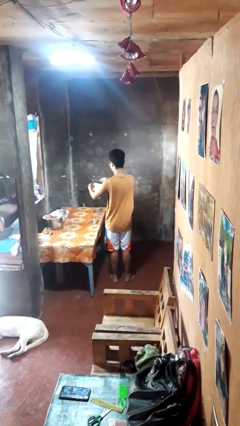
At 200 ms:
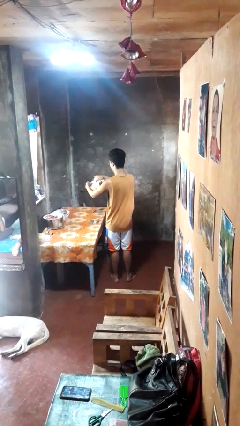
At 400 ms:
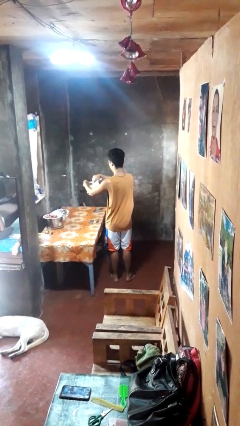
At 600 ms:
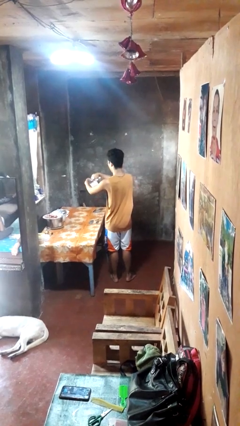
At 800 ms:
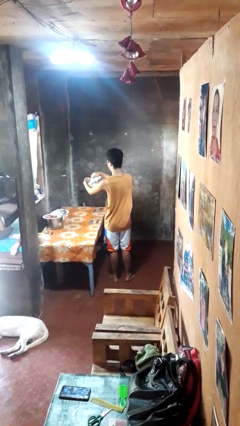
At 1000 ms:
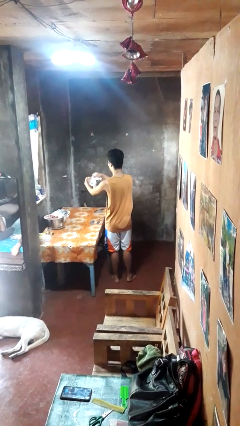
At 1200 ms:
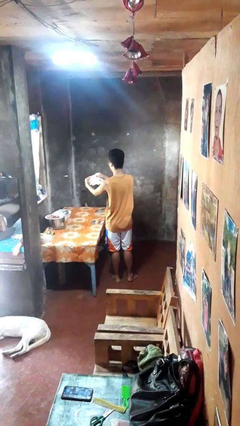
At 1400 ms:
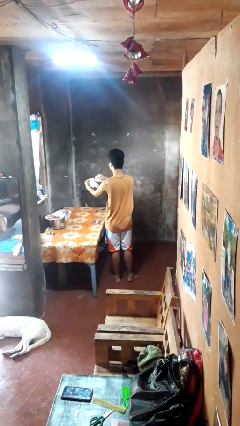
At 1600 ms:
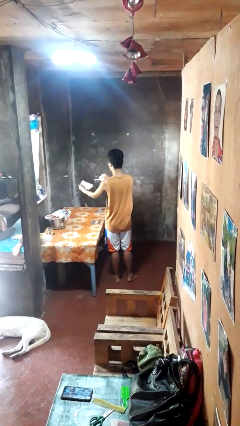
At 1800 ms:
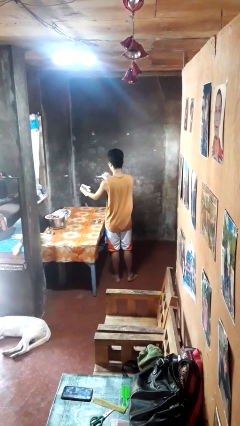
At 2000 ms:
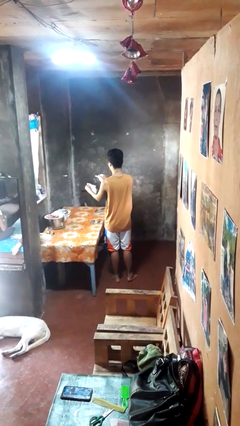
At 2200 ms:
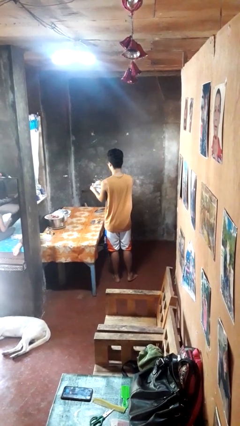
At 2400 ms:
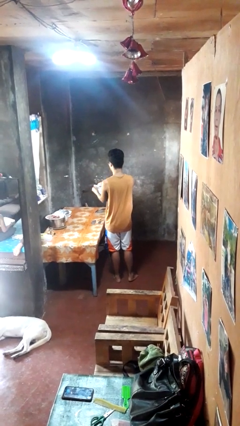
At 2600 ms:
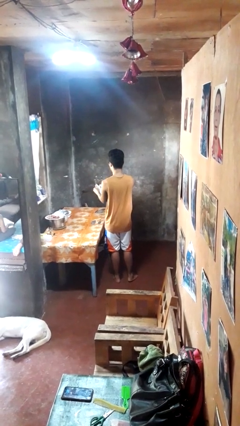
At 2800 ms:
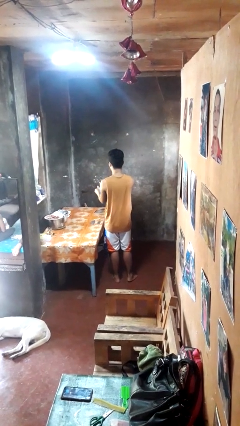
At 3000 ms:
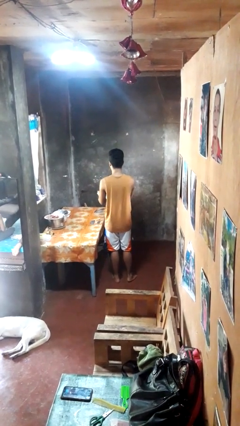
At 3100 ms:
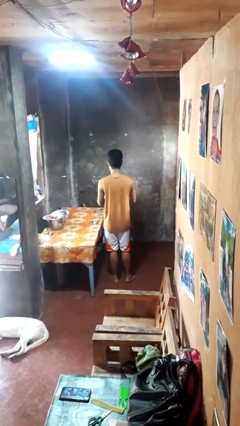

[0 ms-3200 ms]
person tears paper

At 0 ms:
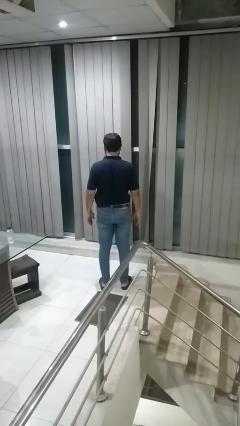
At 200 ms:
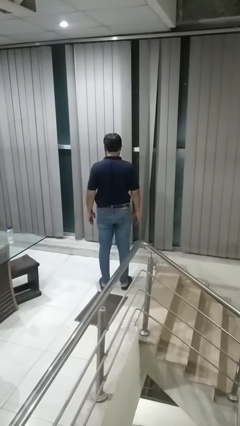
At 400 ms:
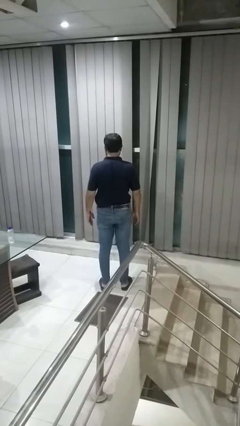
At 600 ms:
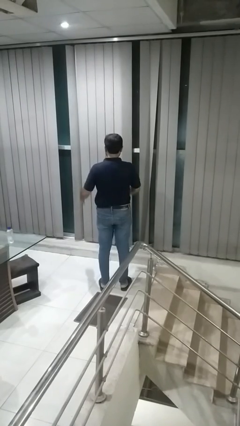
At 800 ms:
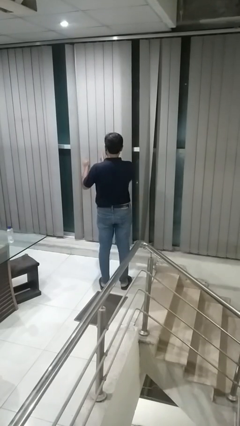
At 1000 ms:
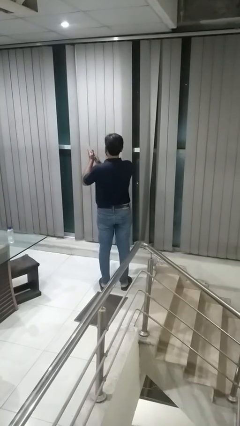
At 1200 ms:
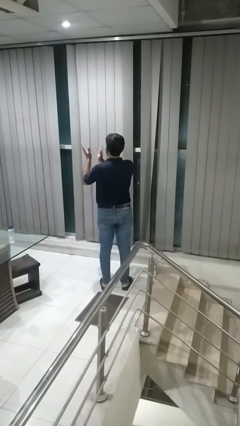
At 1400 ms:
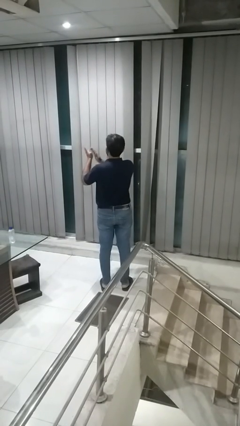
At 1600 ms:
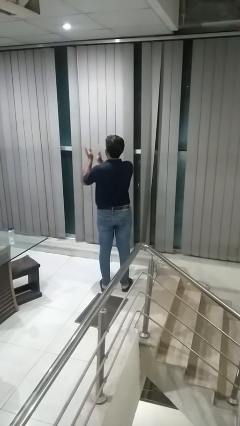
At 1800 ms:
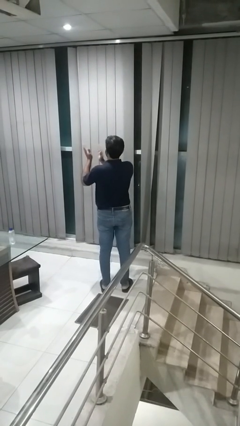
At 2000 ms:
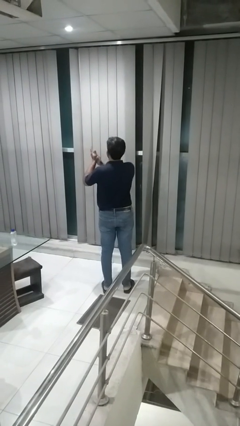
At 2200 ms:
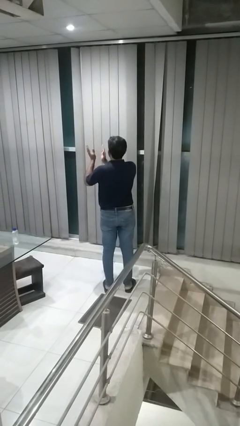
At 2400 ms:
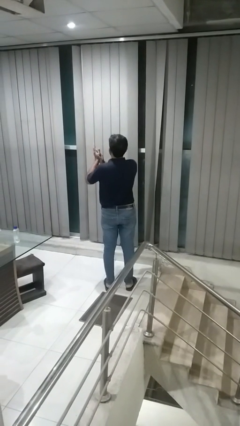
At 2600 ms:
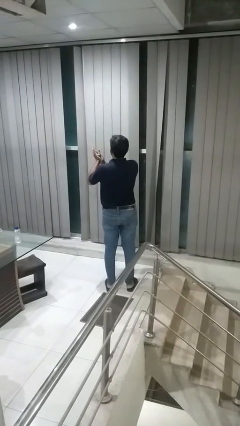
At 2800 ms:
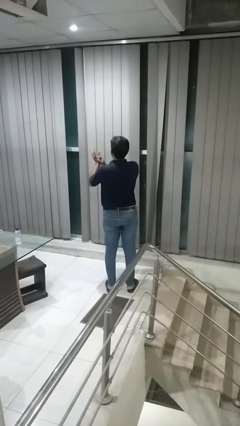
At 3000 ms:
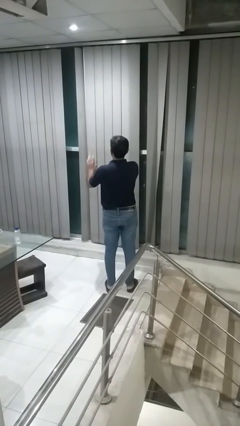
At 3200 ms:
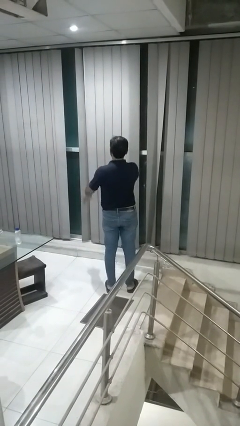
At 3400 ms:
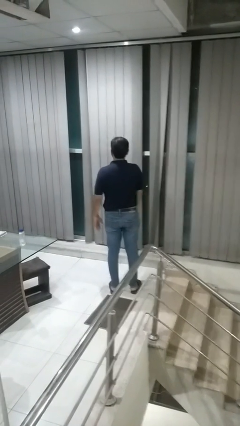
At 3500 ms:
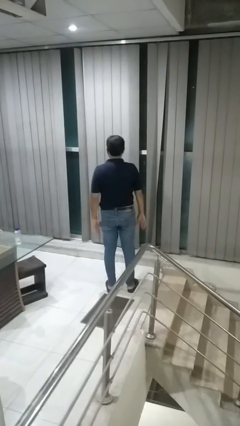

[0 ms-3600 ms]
person claps hands

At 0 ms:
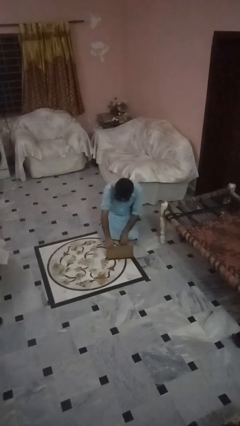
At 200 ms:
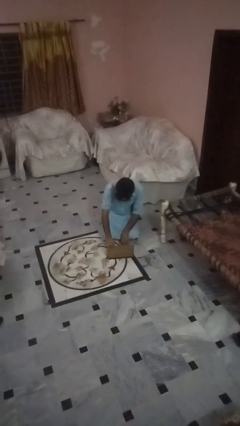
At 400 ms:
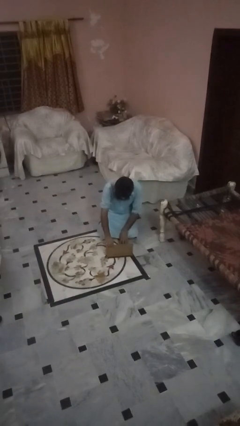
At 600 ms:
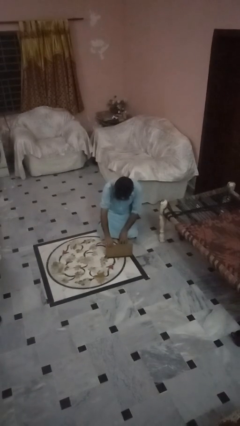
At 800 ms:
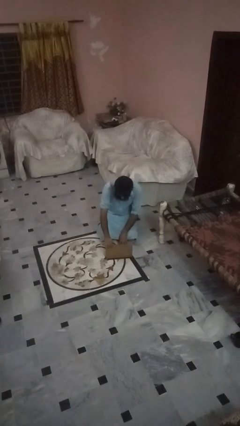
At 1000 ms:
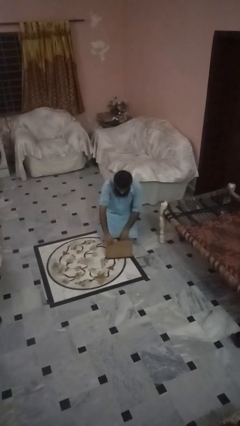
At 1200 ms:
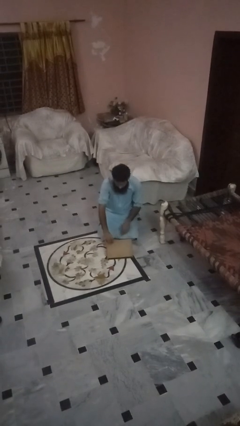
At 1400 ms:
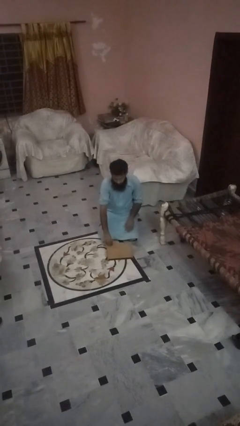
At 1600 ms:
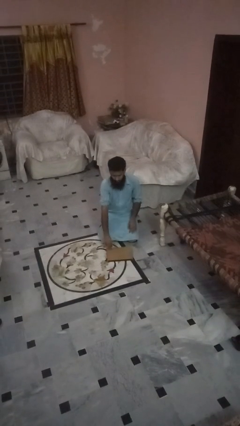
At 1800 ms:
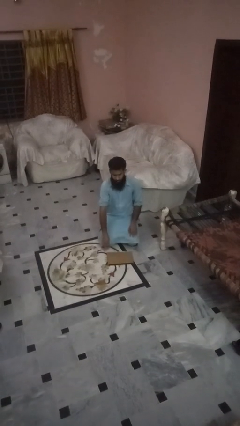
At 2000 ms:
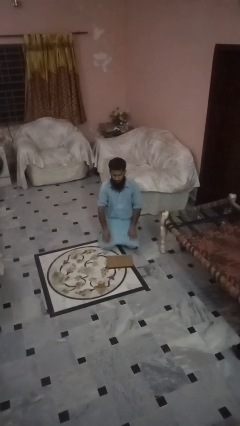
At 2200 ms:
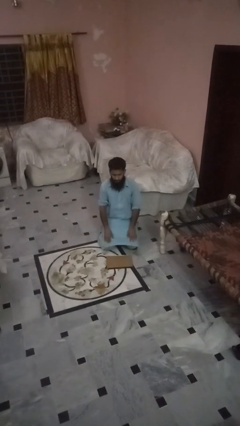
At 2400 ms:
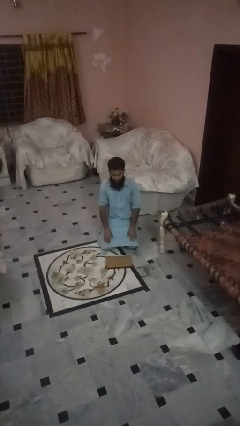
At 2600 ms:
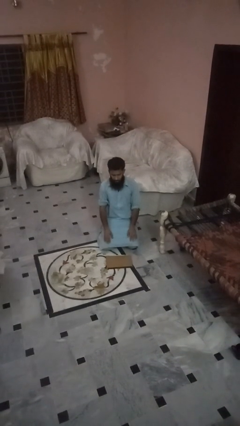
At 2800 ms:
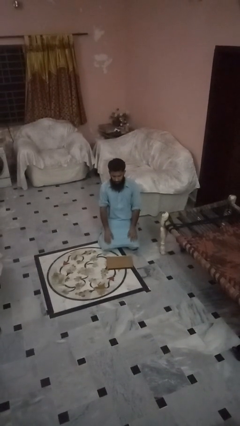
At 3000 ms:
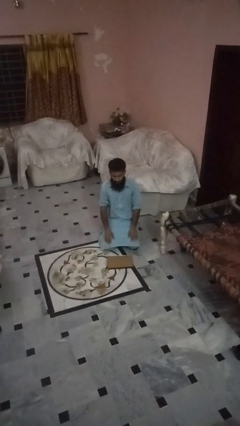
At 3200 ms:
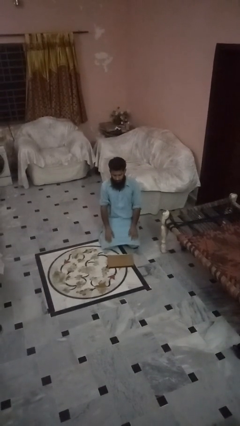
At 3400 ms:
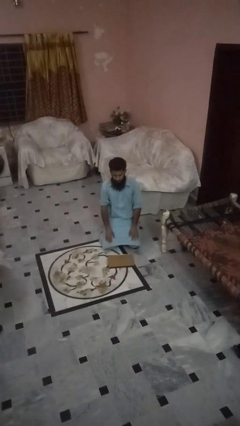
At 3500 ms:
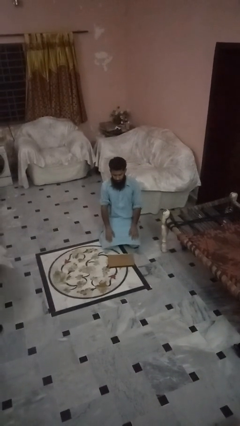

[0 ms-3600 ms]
person closes laptop

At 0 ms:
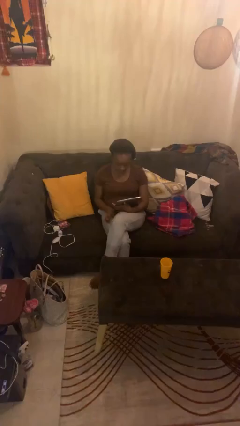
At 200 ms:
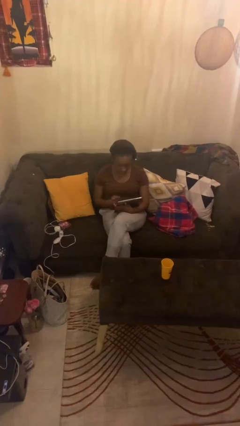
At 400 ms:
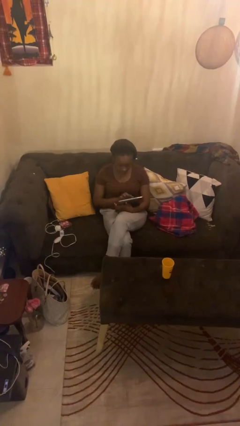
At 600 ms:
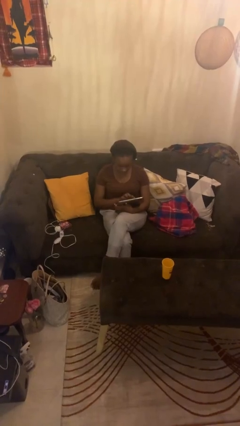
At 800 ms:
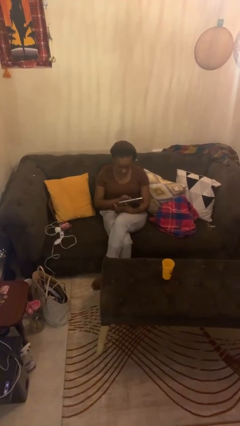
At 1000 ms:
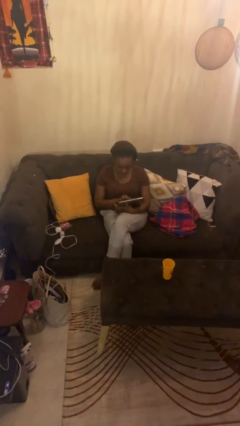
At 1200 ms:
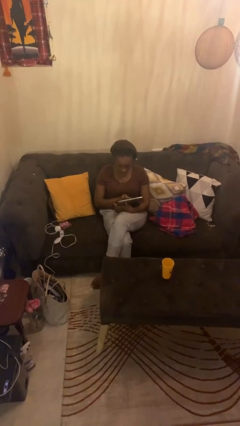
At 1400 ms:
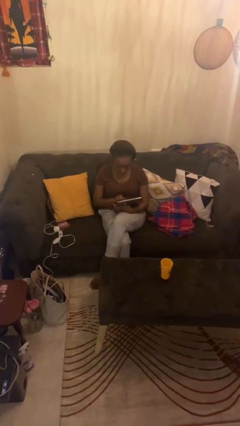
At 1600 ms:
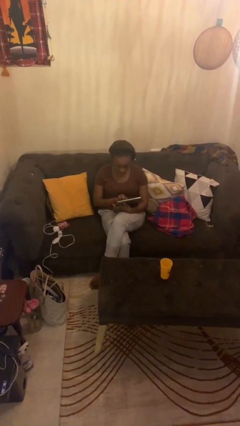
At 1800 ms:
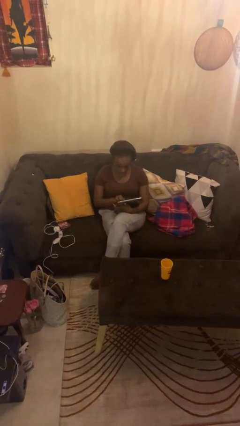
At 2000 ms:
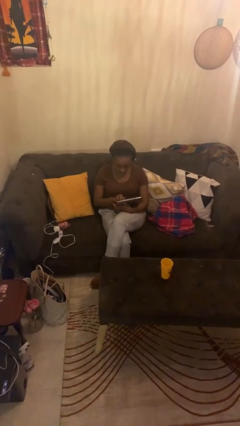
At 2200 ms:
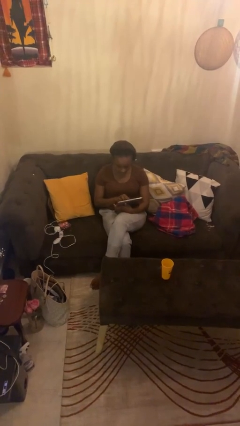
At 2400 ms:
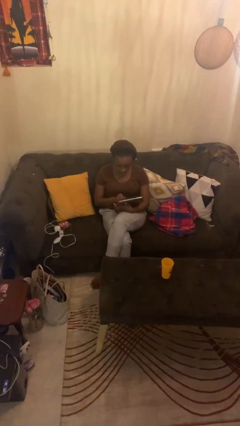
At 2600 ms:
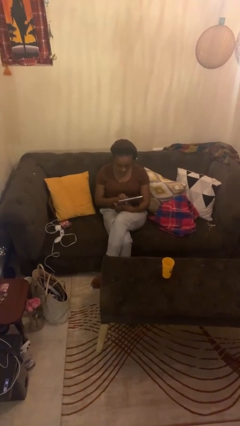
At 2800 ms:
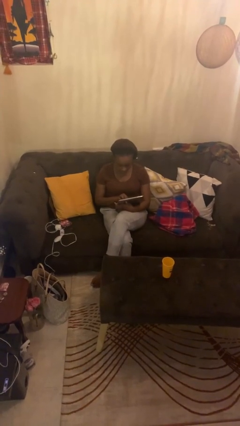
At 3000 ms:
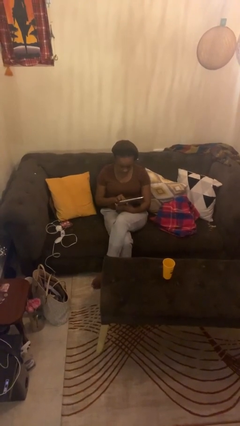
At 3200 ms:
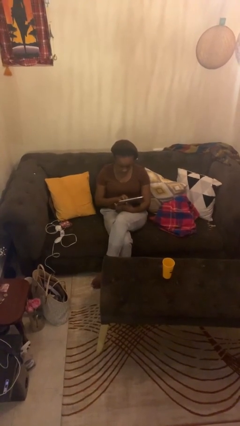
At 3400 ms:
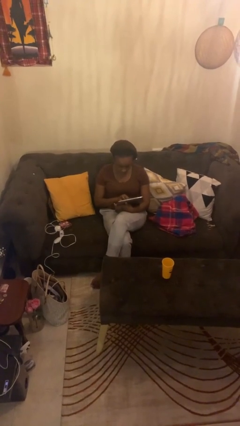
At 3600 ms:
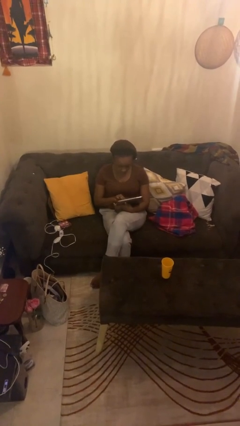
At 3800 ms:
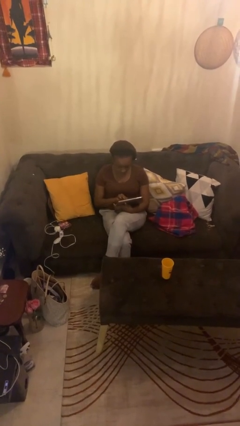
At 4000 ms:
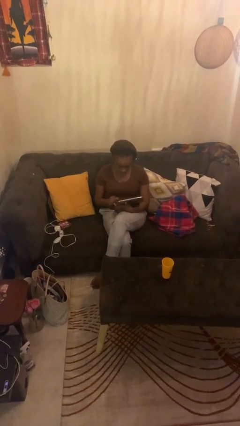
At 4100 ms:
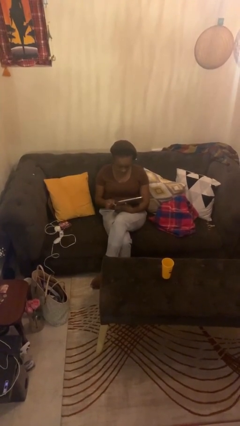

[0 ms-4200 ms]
person interacts with tablet

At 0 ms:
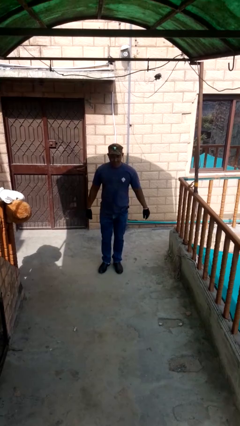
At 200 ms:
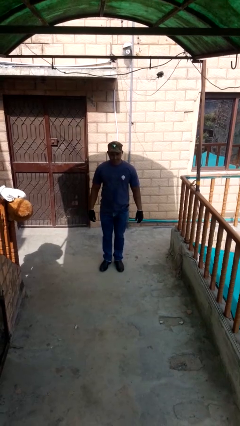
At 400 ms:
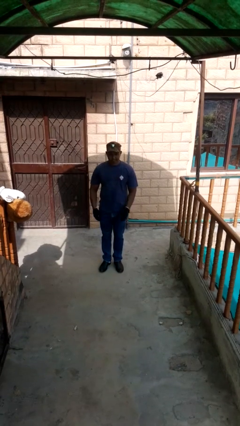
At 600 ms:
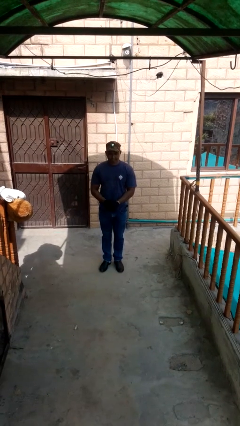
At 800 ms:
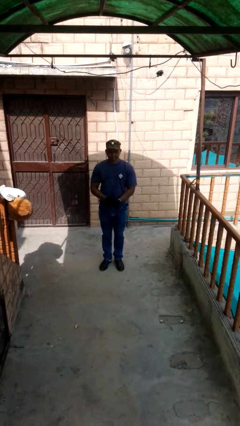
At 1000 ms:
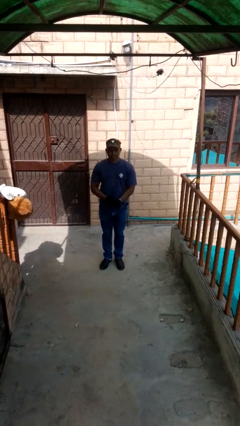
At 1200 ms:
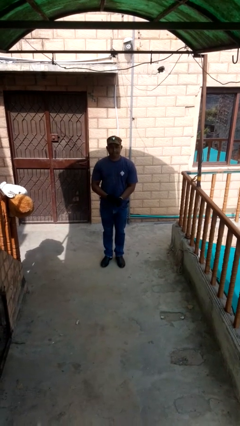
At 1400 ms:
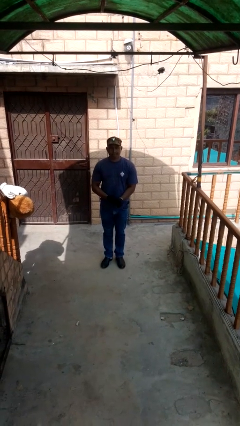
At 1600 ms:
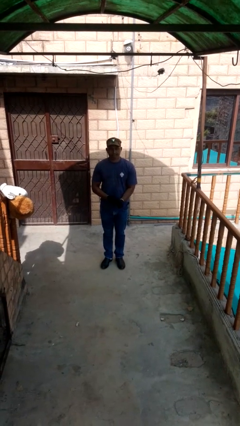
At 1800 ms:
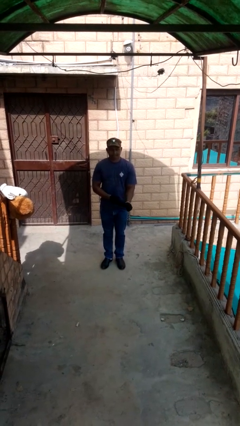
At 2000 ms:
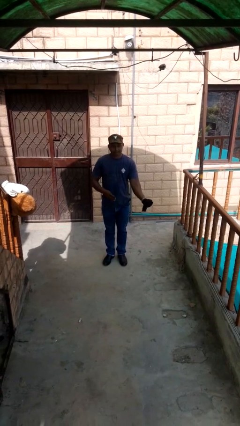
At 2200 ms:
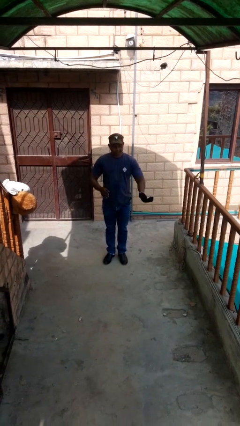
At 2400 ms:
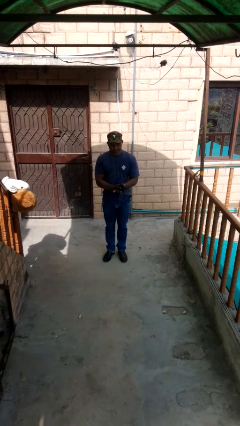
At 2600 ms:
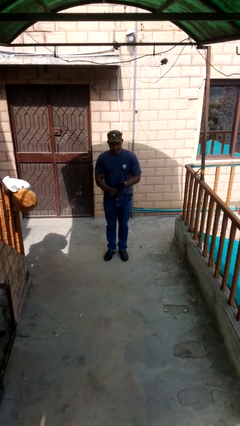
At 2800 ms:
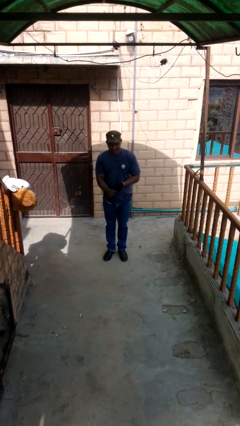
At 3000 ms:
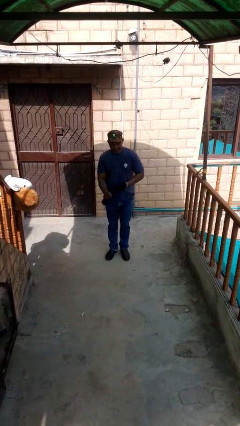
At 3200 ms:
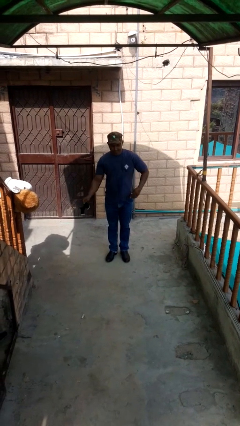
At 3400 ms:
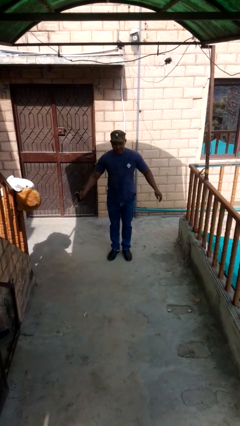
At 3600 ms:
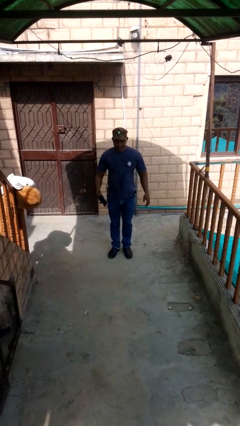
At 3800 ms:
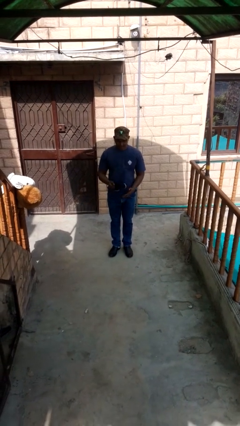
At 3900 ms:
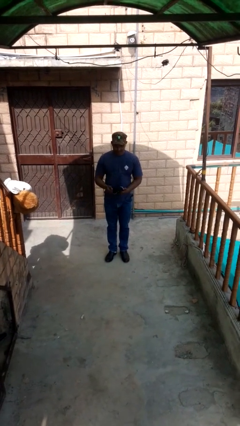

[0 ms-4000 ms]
person takes off gloves
